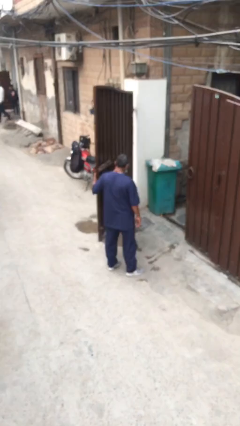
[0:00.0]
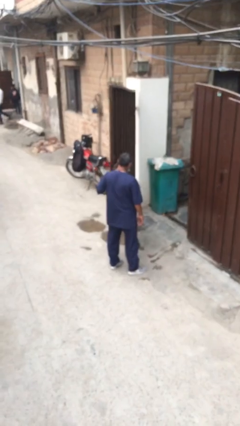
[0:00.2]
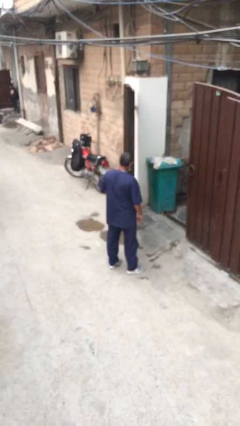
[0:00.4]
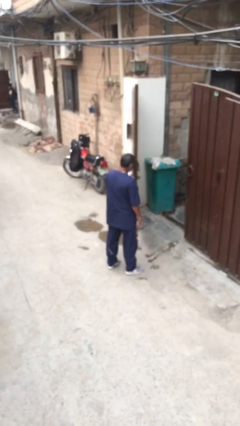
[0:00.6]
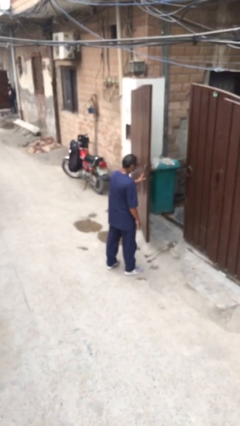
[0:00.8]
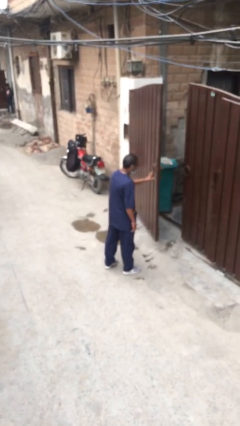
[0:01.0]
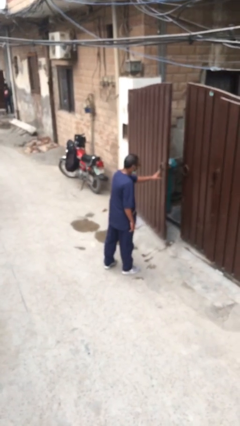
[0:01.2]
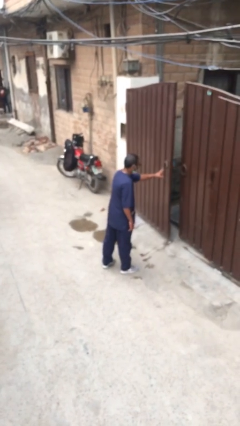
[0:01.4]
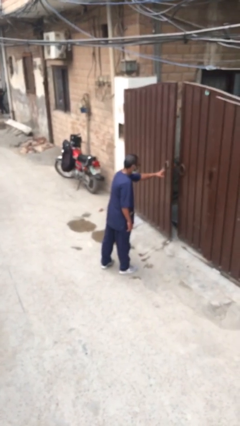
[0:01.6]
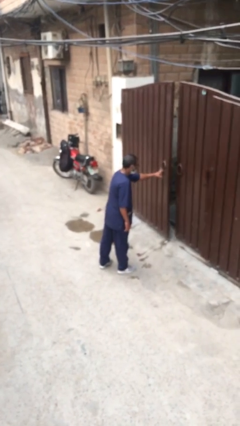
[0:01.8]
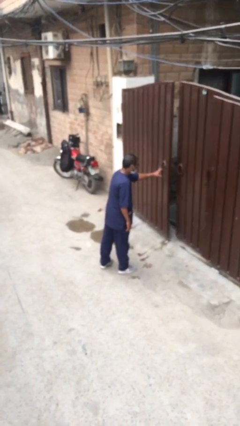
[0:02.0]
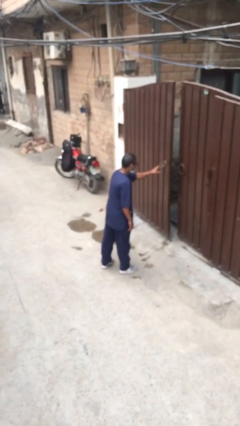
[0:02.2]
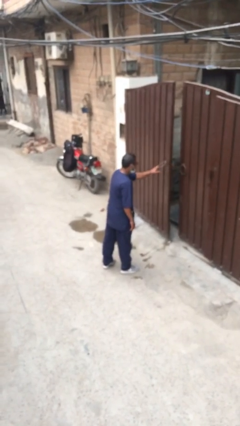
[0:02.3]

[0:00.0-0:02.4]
person closes facility door

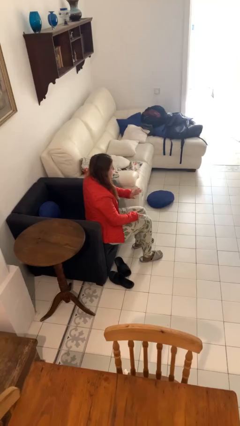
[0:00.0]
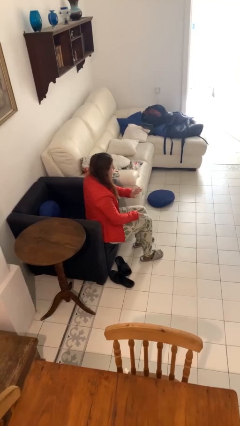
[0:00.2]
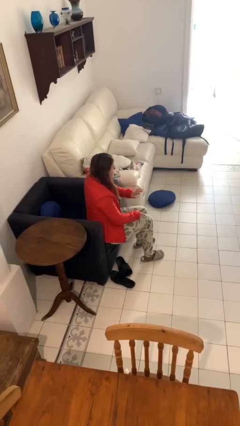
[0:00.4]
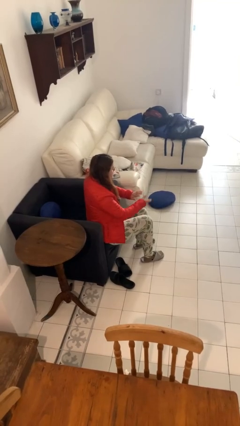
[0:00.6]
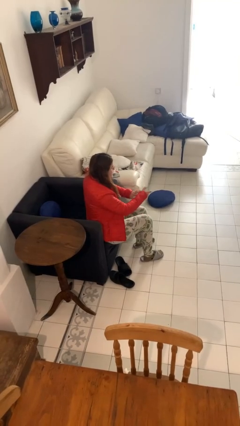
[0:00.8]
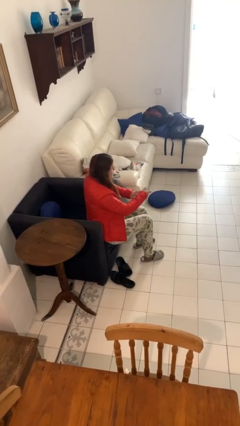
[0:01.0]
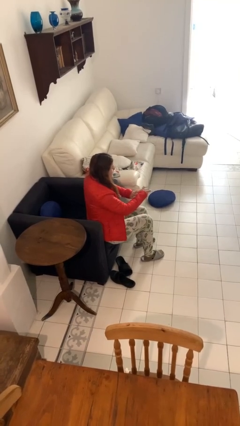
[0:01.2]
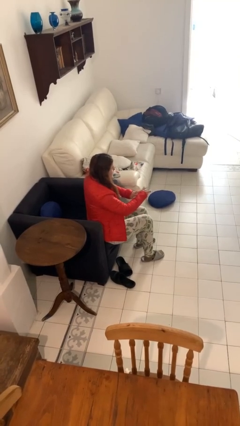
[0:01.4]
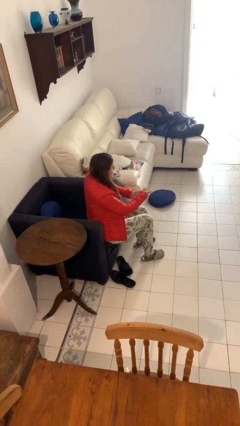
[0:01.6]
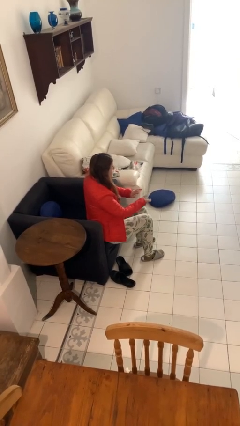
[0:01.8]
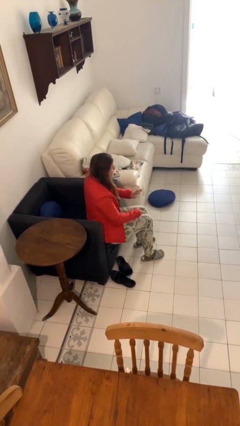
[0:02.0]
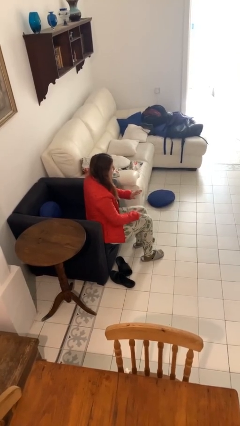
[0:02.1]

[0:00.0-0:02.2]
person clips fingernails

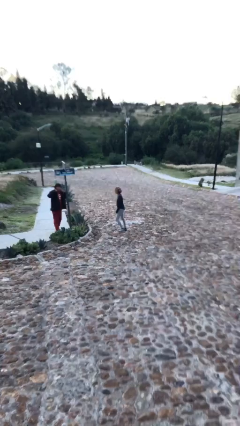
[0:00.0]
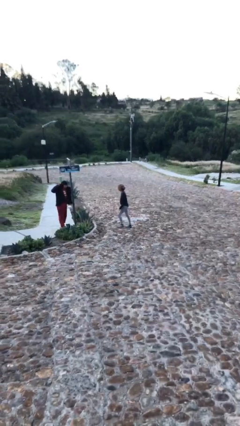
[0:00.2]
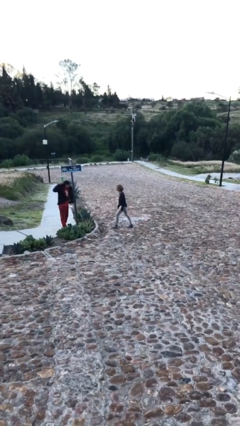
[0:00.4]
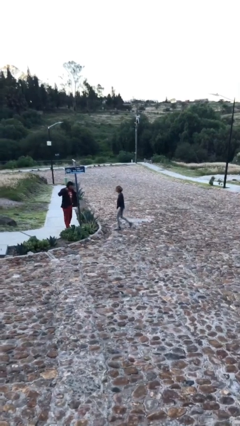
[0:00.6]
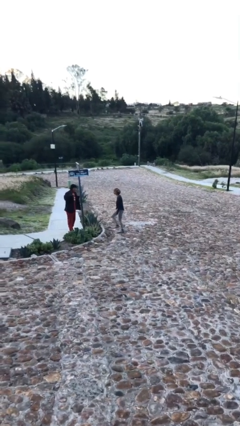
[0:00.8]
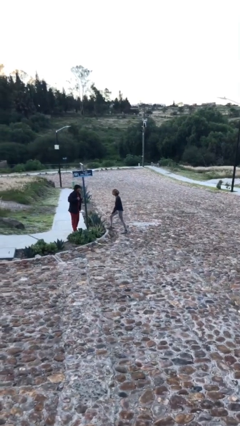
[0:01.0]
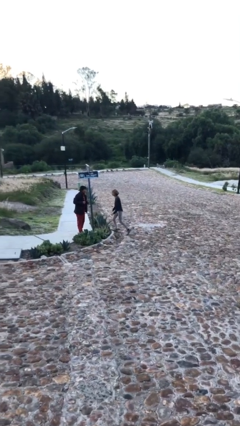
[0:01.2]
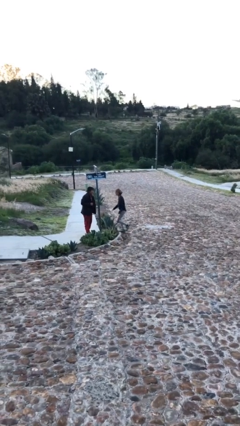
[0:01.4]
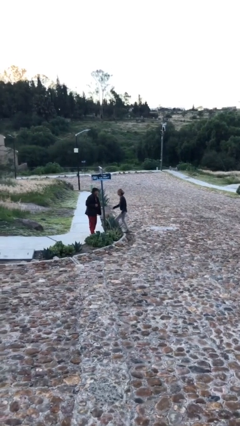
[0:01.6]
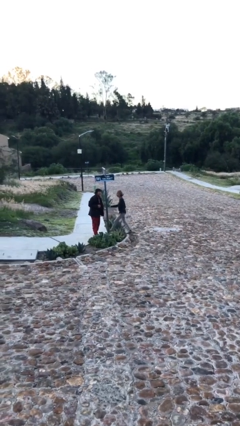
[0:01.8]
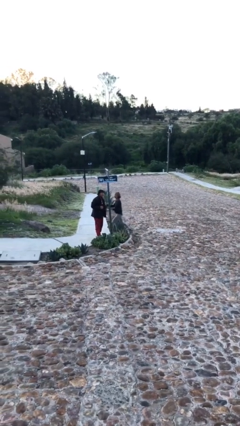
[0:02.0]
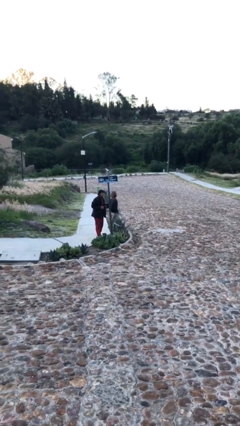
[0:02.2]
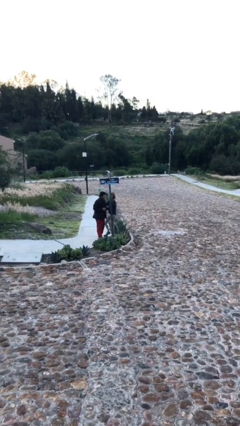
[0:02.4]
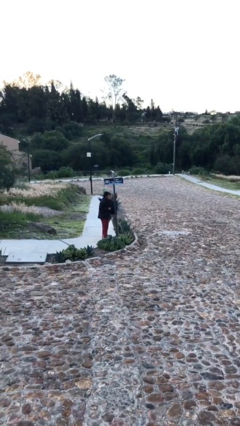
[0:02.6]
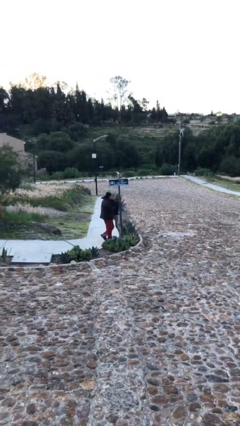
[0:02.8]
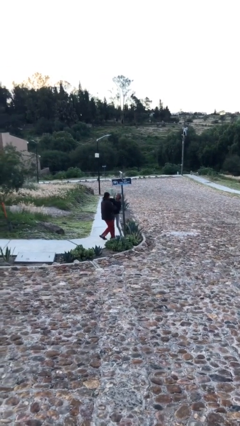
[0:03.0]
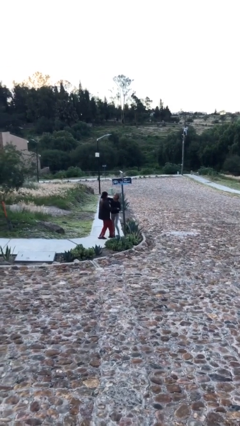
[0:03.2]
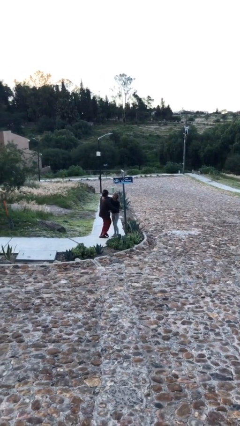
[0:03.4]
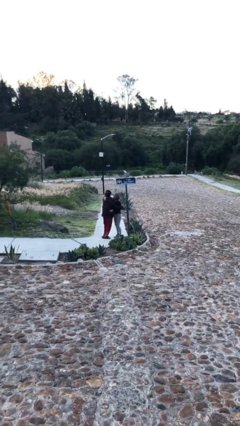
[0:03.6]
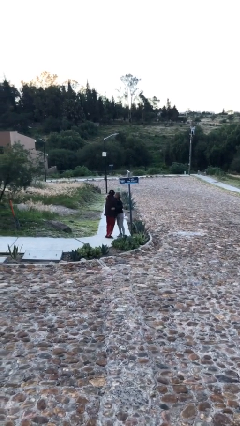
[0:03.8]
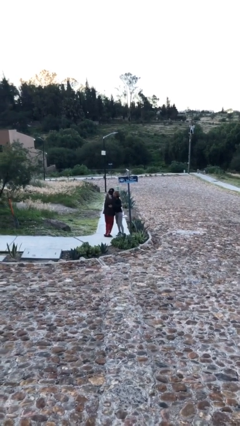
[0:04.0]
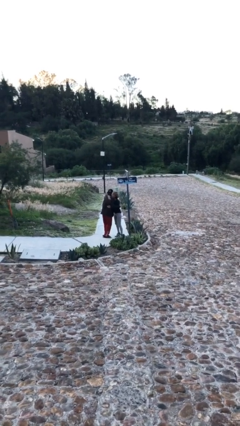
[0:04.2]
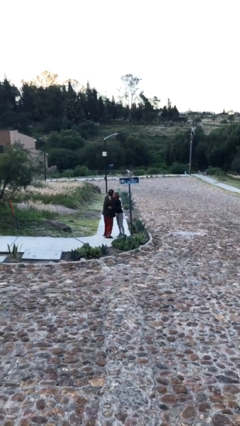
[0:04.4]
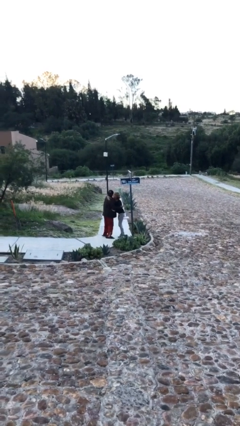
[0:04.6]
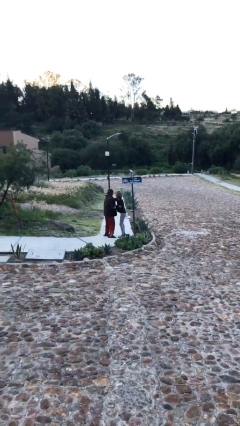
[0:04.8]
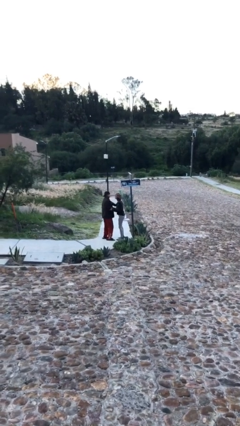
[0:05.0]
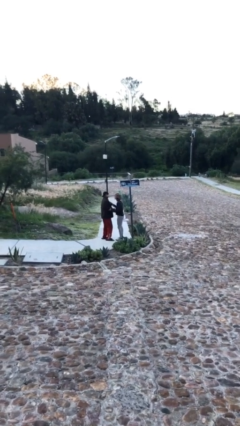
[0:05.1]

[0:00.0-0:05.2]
person embraces person

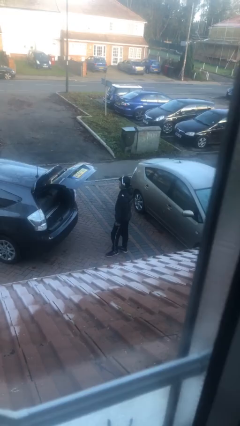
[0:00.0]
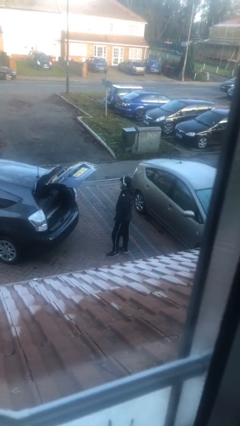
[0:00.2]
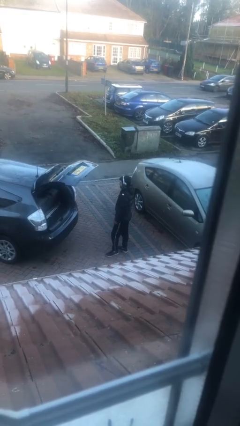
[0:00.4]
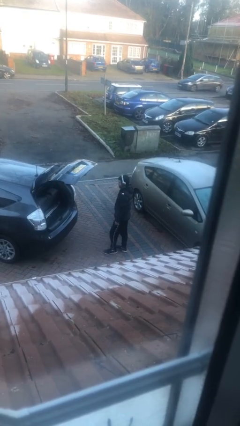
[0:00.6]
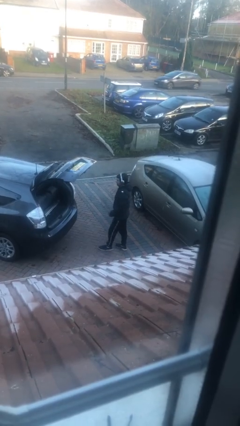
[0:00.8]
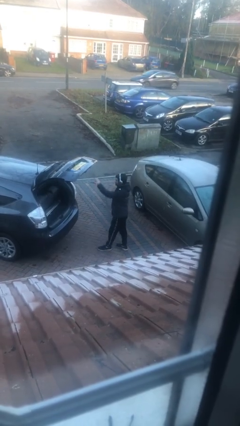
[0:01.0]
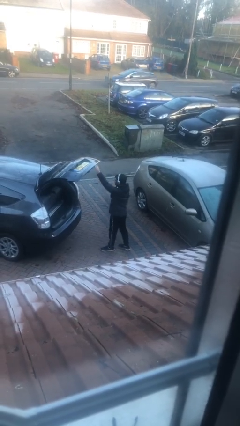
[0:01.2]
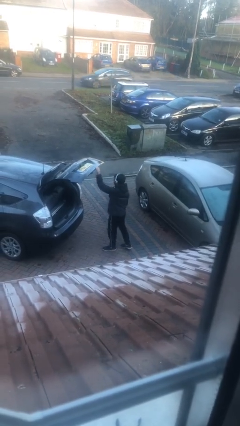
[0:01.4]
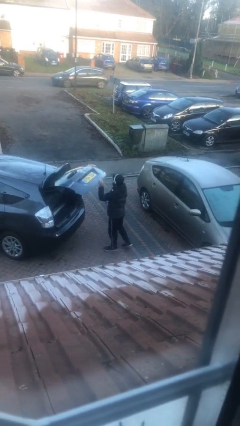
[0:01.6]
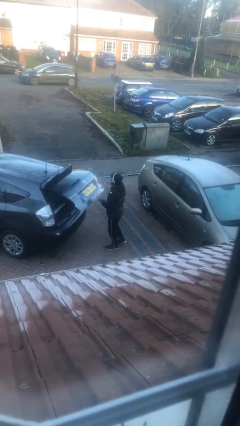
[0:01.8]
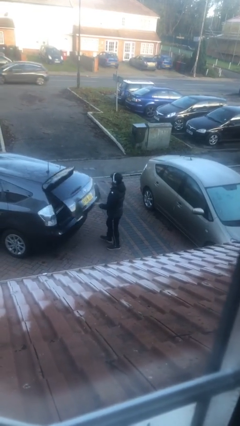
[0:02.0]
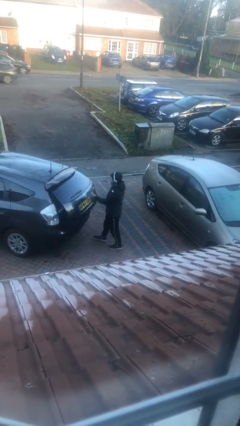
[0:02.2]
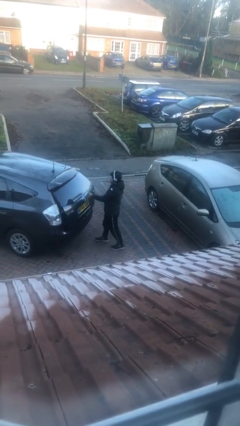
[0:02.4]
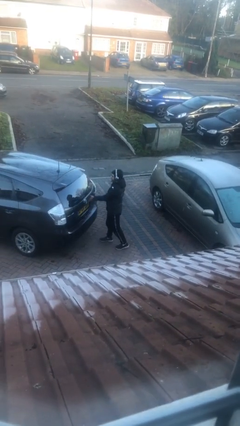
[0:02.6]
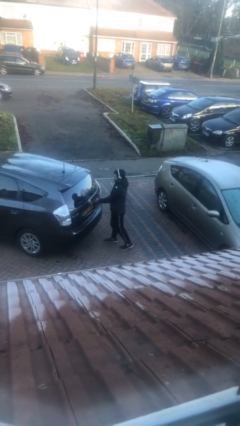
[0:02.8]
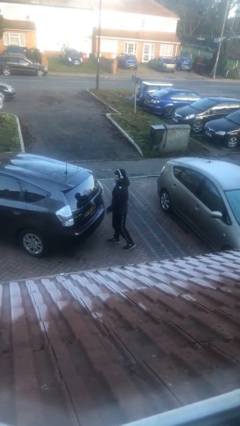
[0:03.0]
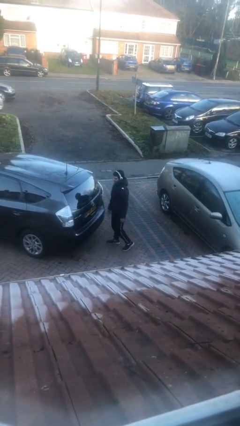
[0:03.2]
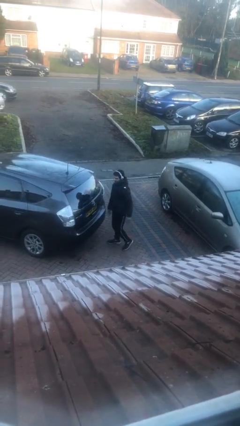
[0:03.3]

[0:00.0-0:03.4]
person closes car trunk

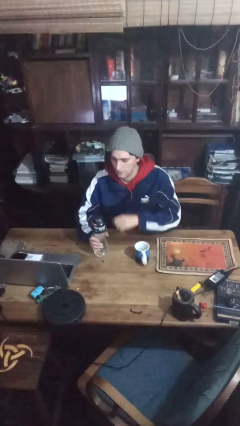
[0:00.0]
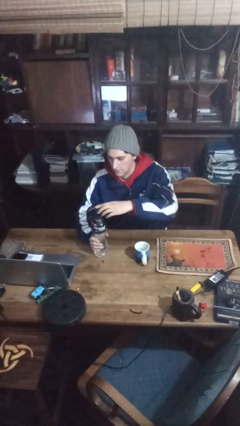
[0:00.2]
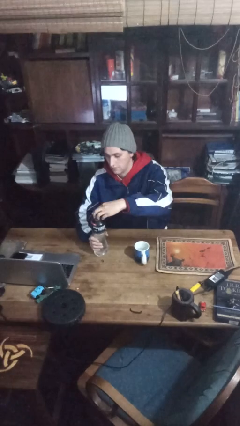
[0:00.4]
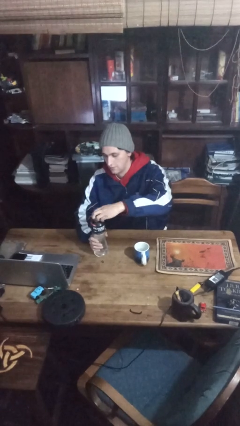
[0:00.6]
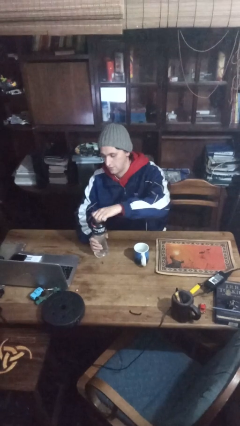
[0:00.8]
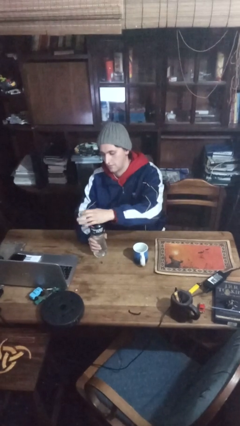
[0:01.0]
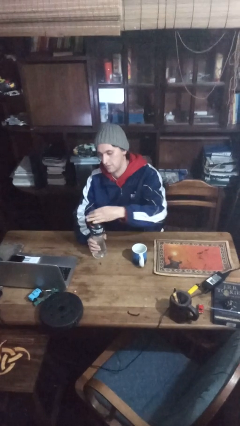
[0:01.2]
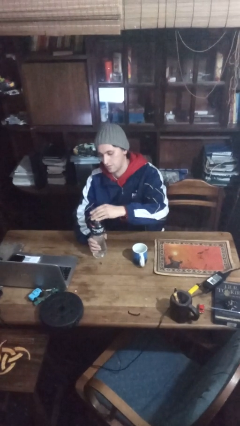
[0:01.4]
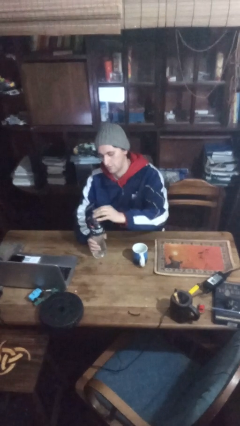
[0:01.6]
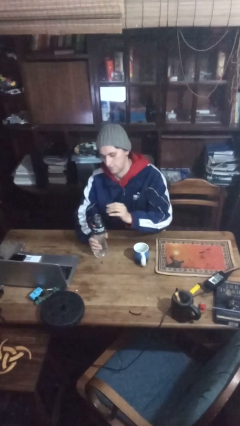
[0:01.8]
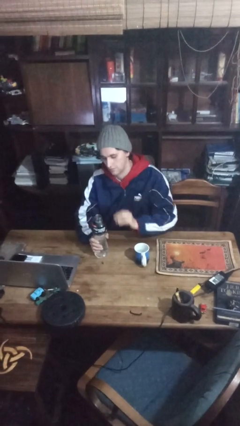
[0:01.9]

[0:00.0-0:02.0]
person unscrews lid from bottle

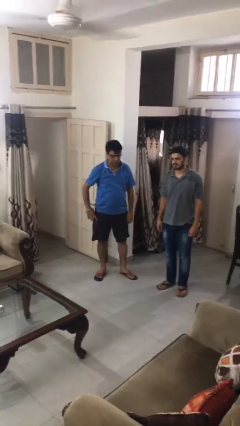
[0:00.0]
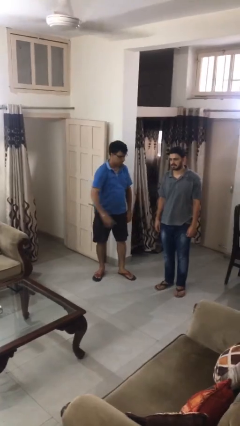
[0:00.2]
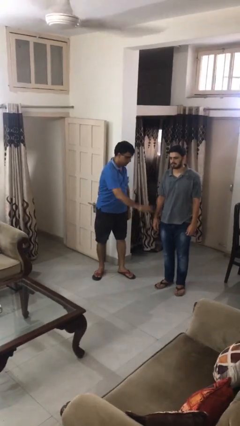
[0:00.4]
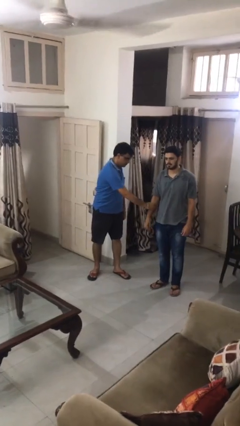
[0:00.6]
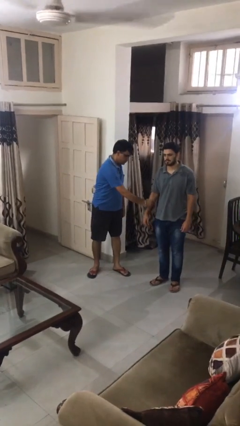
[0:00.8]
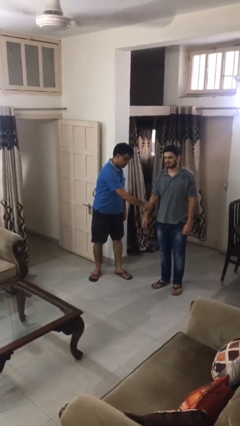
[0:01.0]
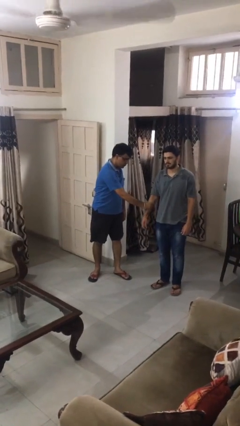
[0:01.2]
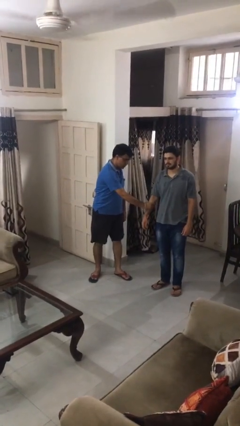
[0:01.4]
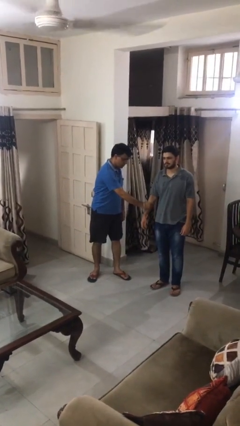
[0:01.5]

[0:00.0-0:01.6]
person grabs person by forearm

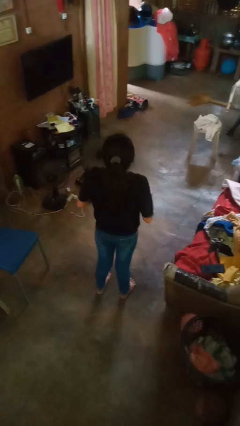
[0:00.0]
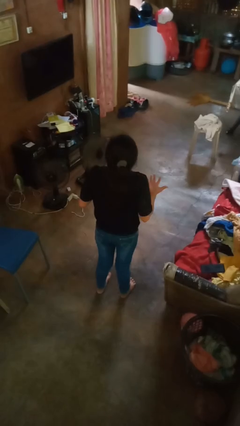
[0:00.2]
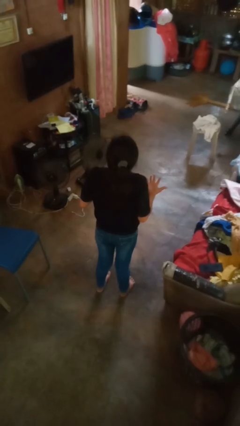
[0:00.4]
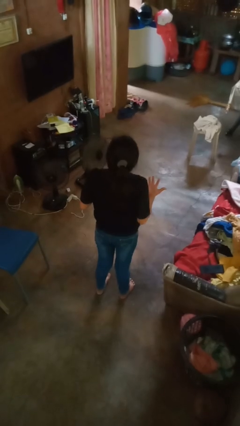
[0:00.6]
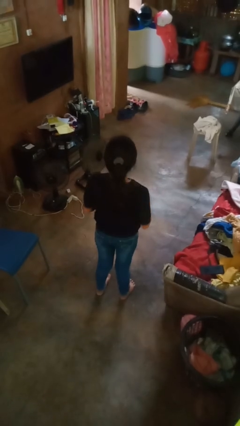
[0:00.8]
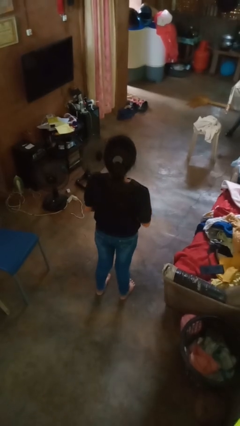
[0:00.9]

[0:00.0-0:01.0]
person shrugs
